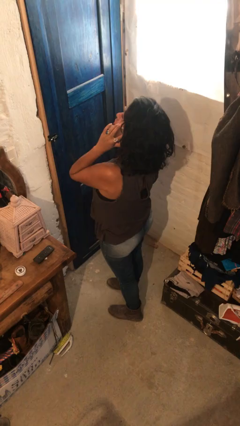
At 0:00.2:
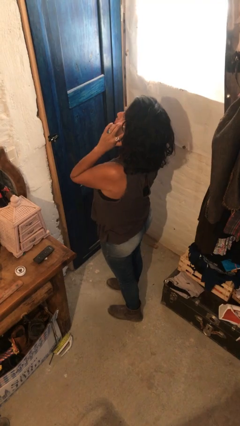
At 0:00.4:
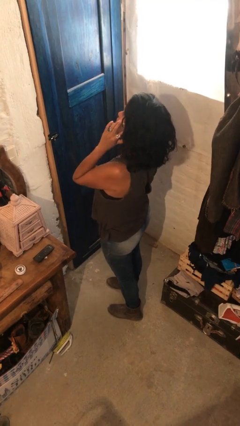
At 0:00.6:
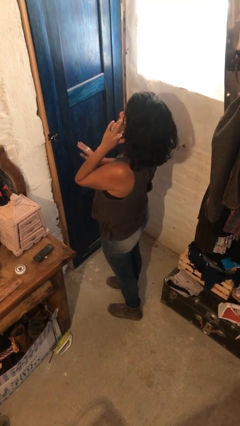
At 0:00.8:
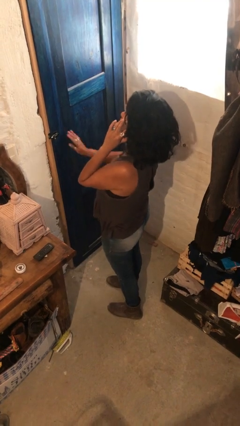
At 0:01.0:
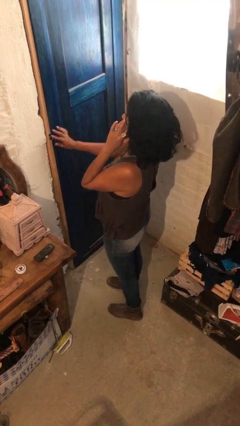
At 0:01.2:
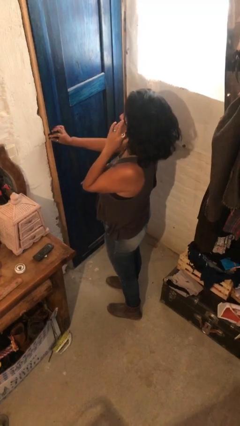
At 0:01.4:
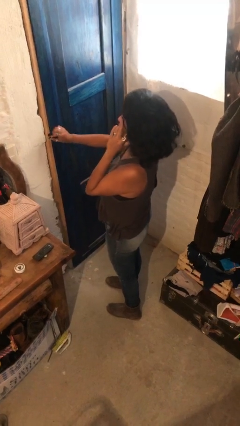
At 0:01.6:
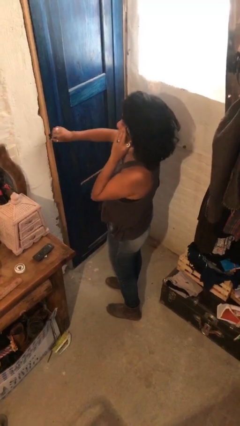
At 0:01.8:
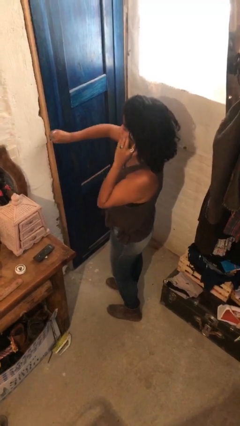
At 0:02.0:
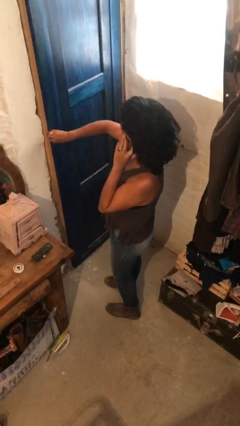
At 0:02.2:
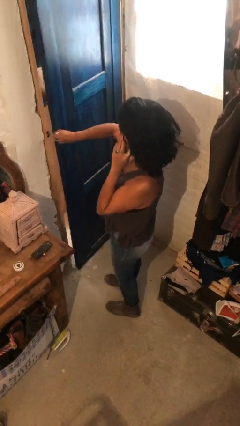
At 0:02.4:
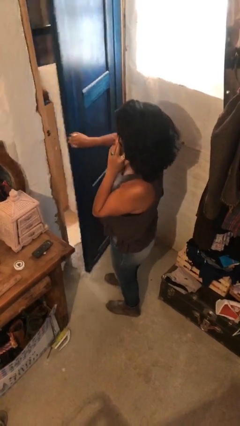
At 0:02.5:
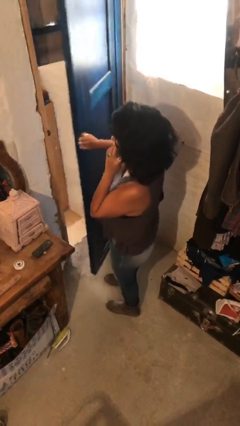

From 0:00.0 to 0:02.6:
person opens facility door

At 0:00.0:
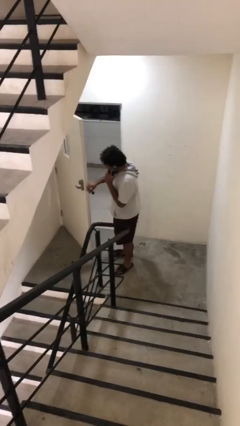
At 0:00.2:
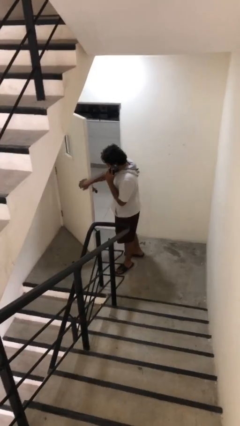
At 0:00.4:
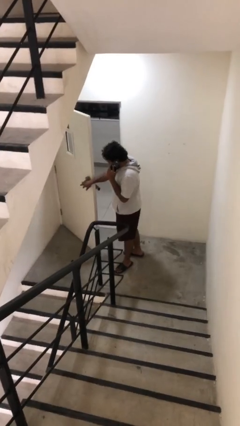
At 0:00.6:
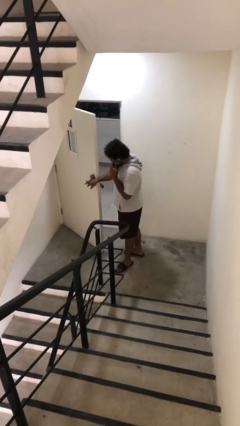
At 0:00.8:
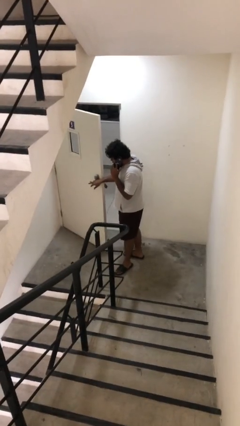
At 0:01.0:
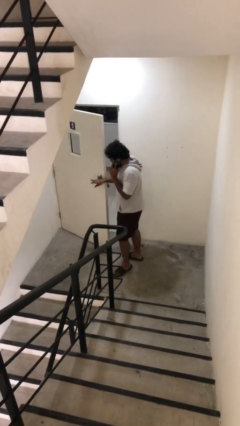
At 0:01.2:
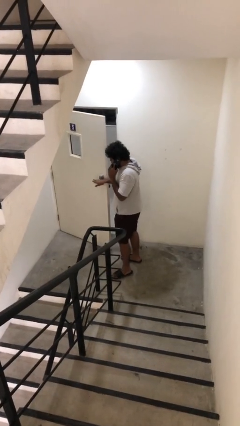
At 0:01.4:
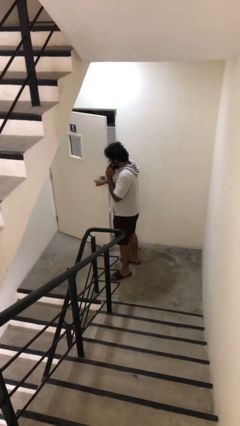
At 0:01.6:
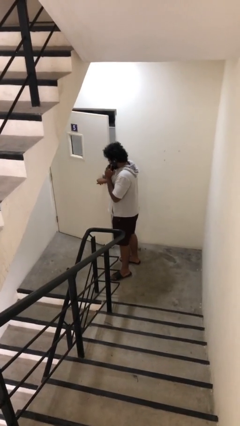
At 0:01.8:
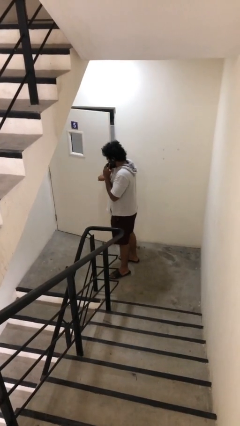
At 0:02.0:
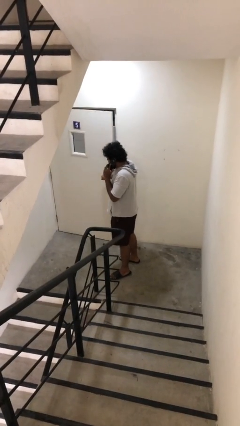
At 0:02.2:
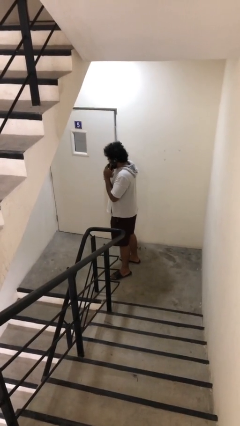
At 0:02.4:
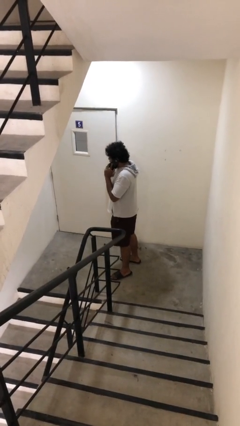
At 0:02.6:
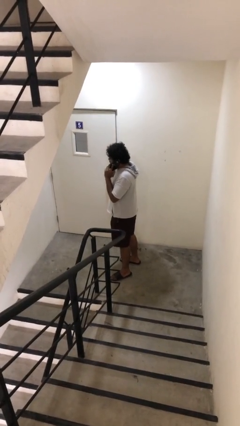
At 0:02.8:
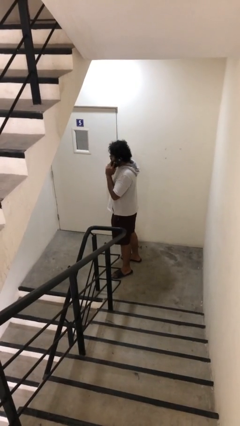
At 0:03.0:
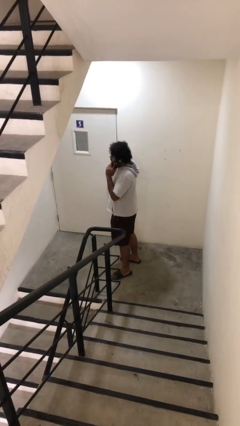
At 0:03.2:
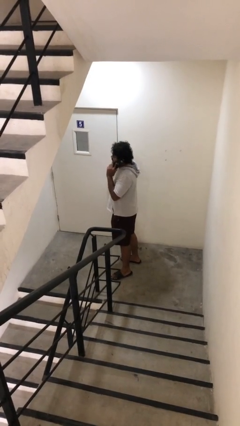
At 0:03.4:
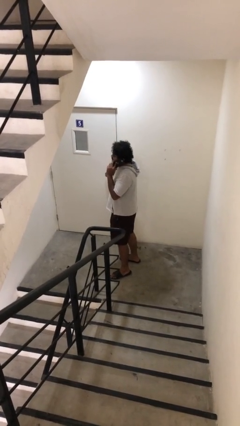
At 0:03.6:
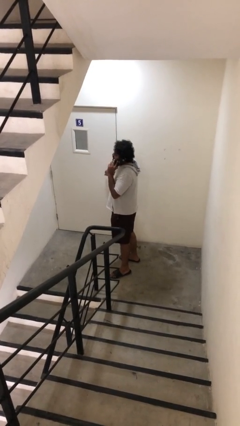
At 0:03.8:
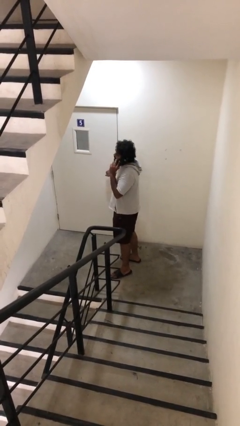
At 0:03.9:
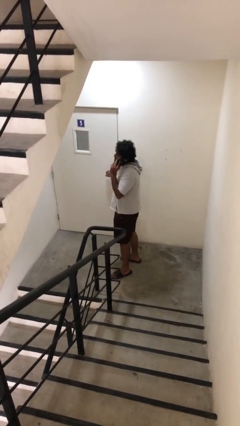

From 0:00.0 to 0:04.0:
person closes facility door

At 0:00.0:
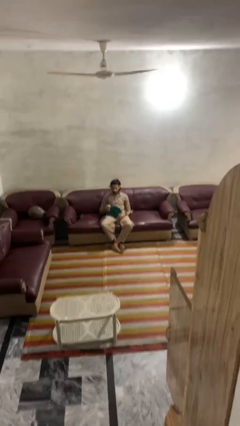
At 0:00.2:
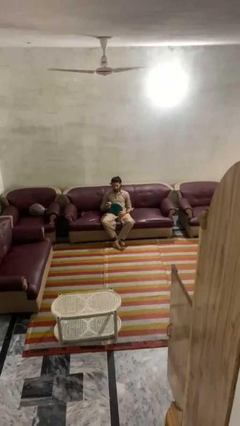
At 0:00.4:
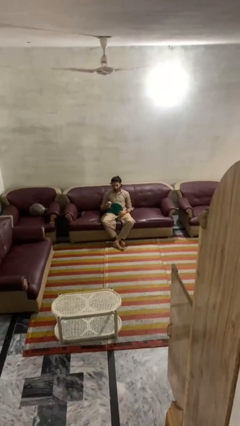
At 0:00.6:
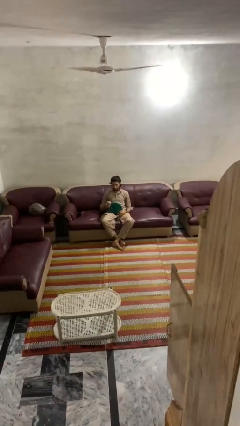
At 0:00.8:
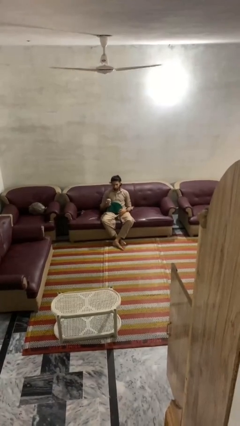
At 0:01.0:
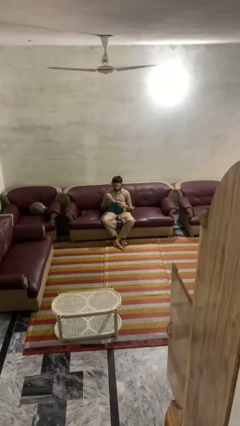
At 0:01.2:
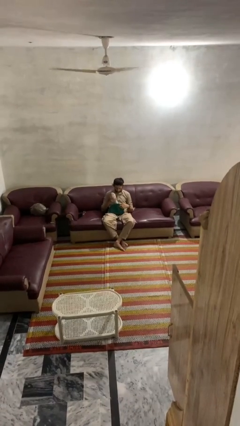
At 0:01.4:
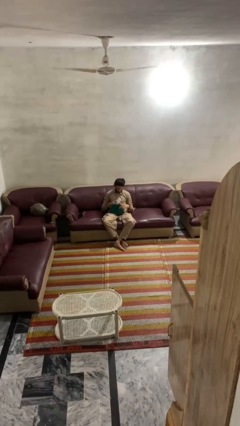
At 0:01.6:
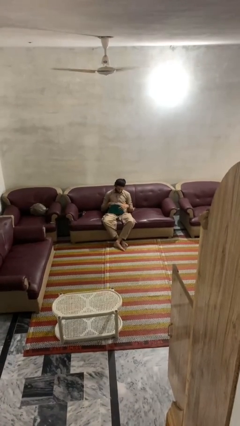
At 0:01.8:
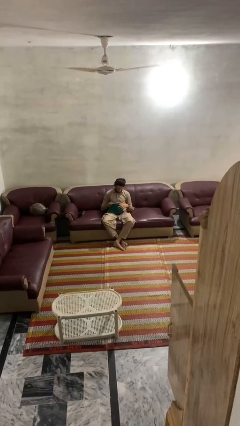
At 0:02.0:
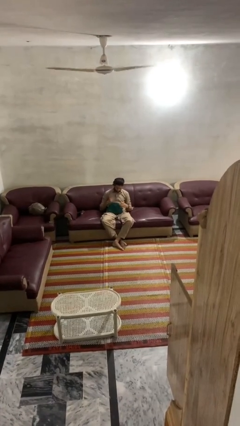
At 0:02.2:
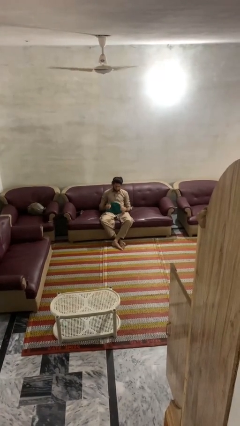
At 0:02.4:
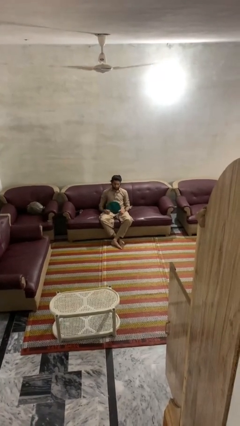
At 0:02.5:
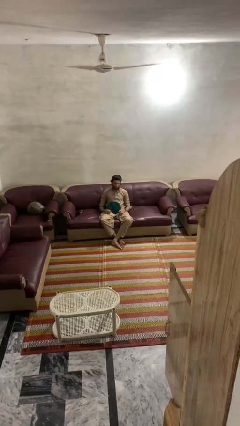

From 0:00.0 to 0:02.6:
person puts object into purse

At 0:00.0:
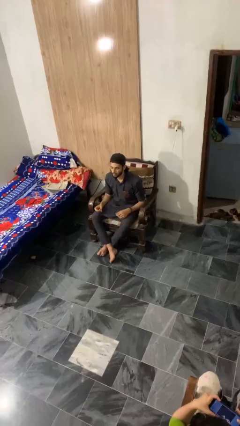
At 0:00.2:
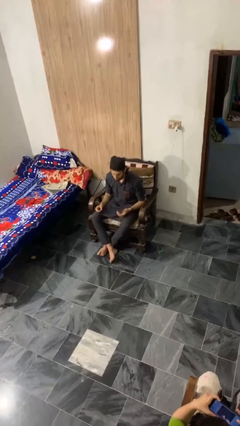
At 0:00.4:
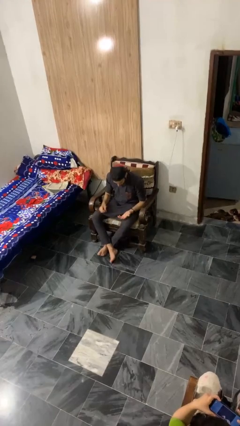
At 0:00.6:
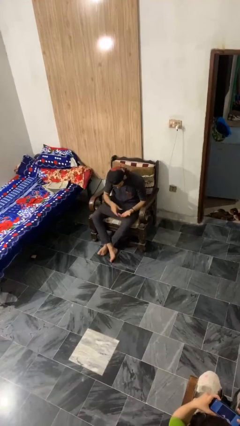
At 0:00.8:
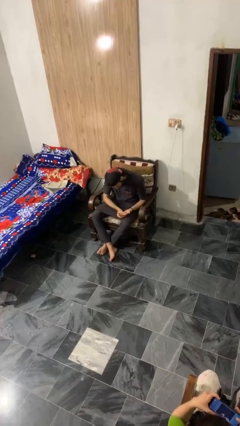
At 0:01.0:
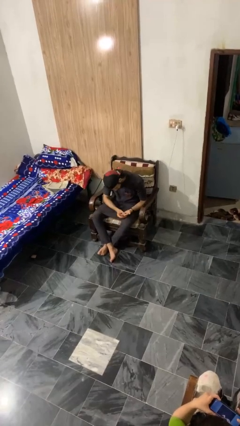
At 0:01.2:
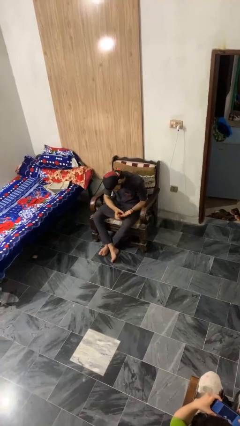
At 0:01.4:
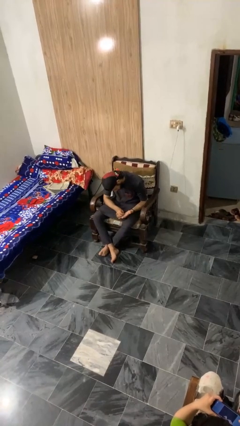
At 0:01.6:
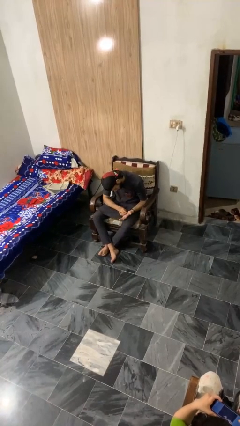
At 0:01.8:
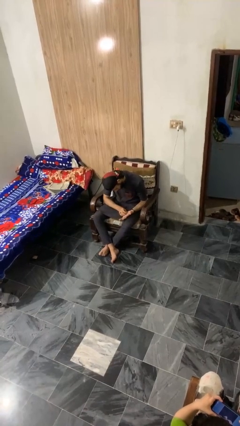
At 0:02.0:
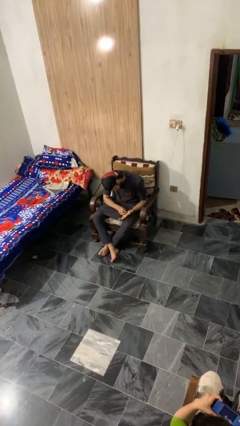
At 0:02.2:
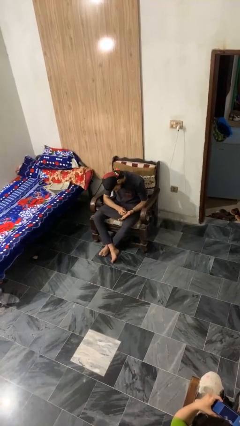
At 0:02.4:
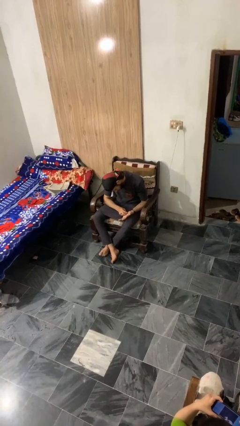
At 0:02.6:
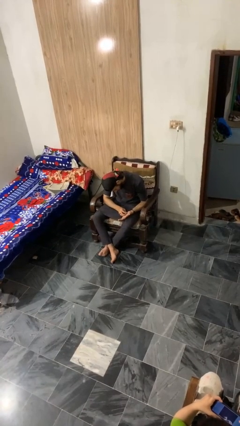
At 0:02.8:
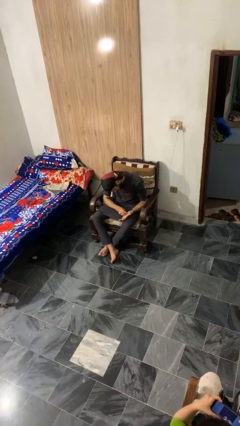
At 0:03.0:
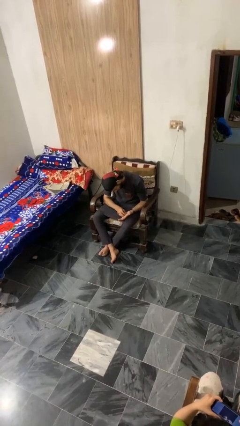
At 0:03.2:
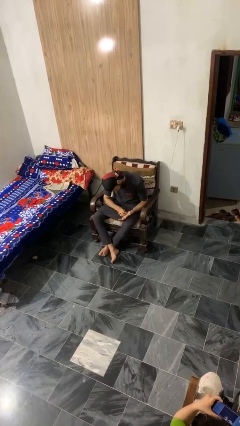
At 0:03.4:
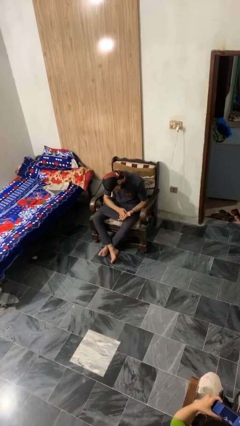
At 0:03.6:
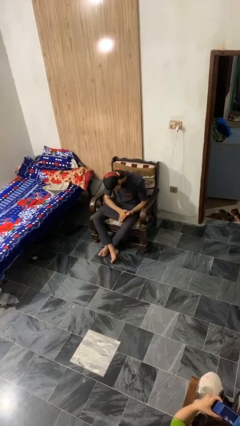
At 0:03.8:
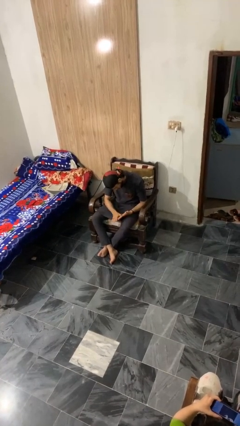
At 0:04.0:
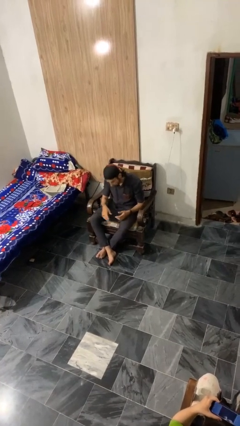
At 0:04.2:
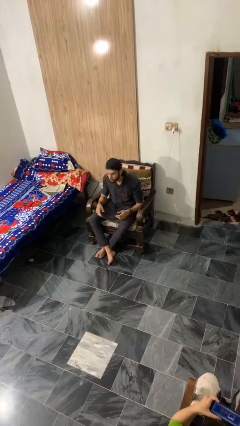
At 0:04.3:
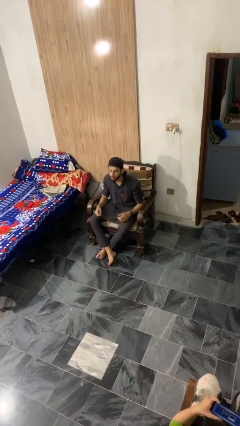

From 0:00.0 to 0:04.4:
person looks at hands in lap

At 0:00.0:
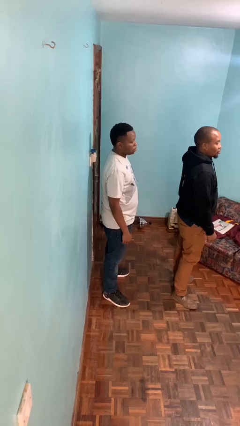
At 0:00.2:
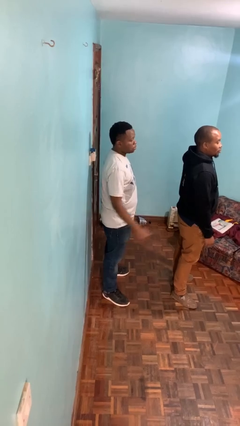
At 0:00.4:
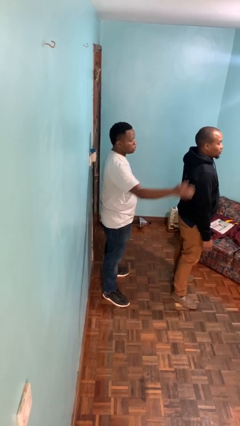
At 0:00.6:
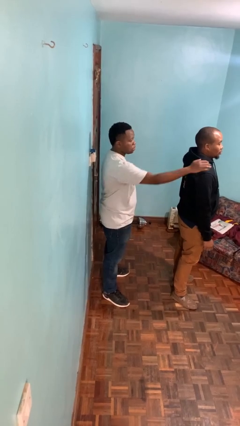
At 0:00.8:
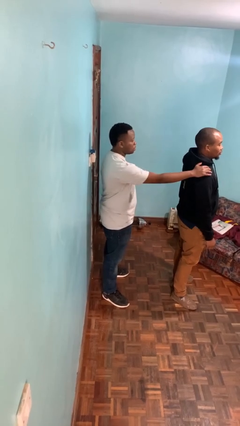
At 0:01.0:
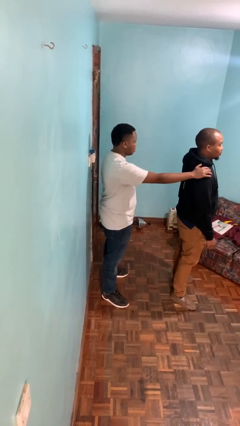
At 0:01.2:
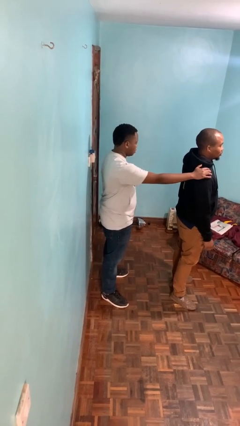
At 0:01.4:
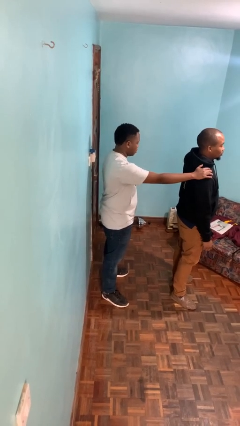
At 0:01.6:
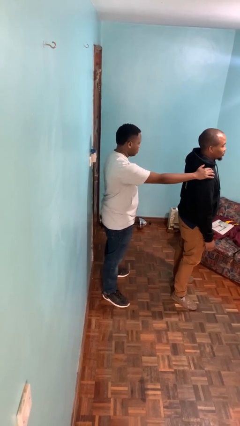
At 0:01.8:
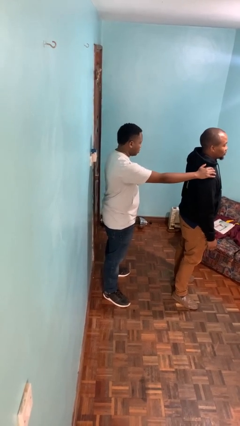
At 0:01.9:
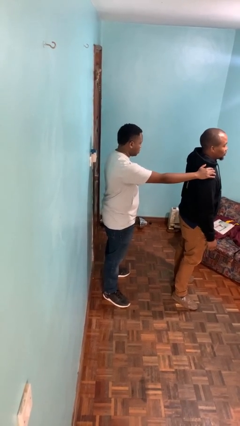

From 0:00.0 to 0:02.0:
person grabs person by shoulder

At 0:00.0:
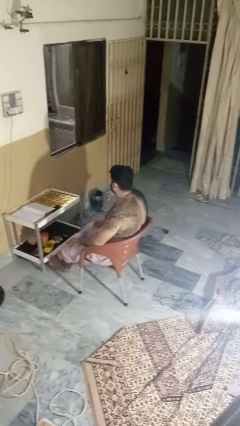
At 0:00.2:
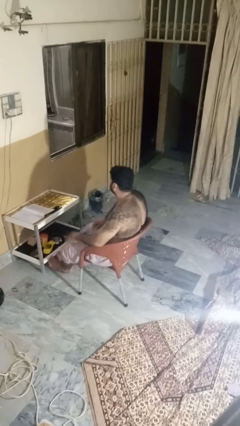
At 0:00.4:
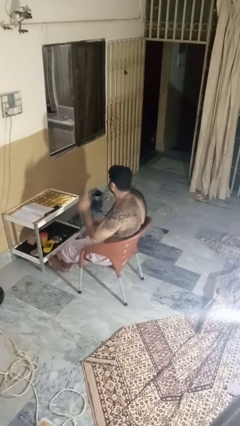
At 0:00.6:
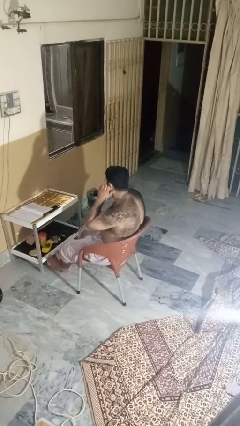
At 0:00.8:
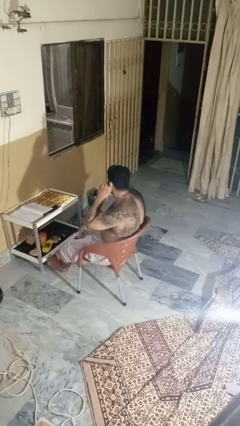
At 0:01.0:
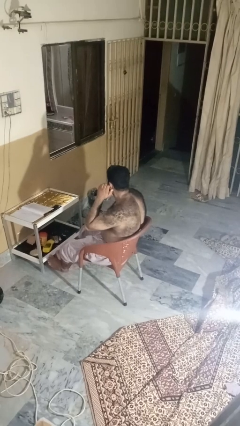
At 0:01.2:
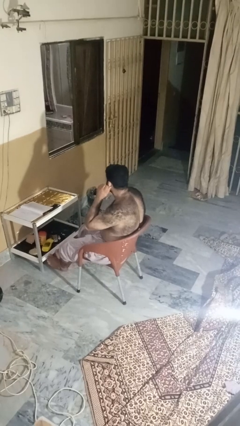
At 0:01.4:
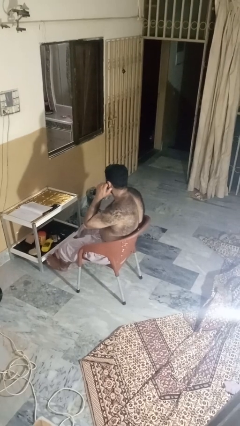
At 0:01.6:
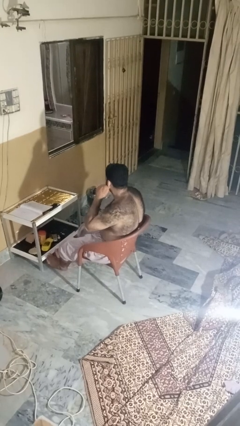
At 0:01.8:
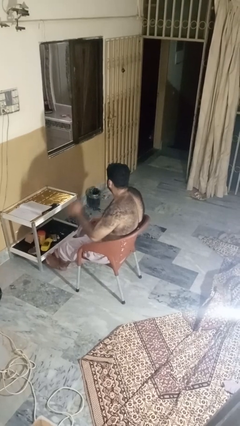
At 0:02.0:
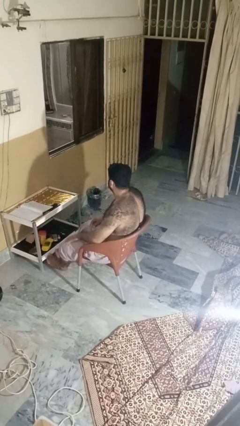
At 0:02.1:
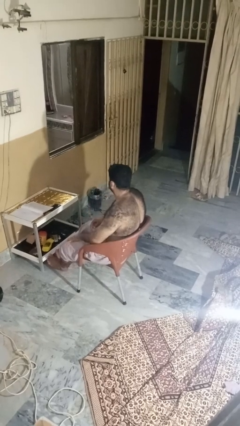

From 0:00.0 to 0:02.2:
person touches earlobe
